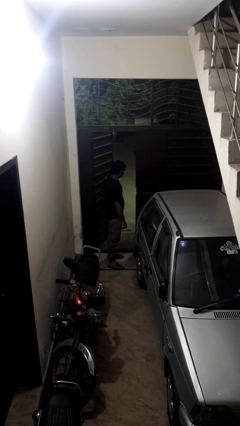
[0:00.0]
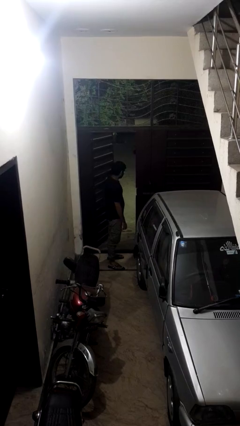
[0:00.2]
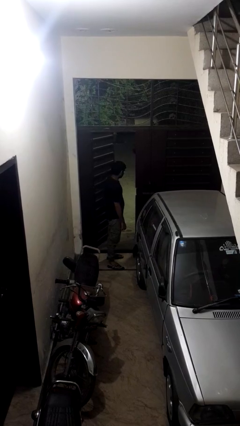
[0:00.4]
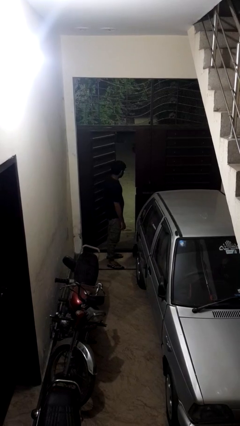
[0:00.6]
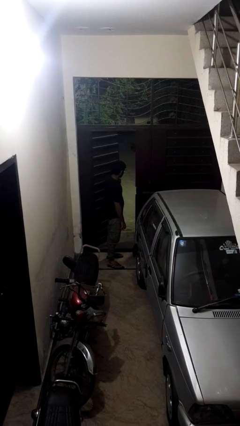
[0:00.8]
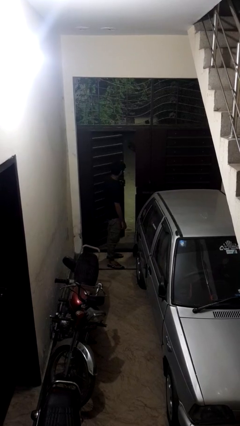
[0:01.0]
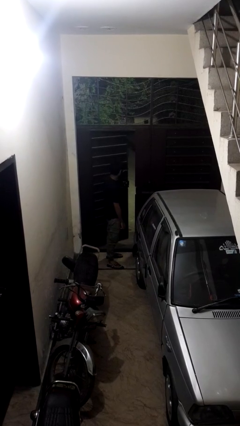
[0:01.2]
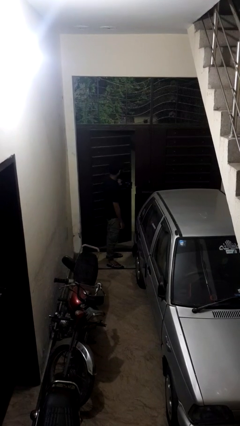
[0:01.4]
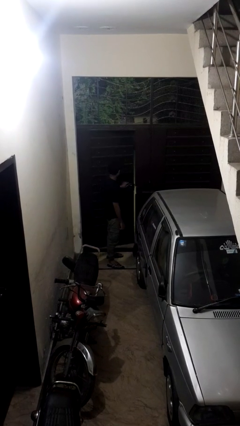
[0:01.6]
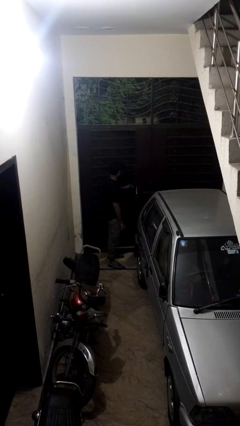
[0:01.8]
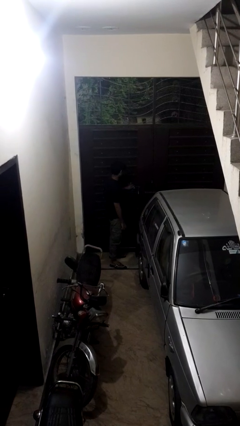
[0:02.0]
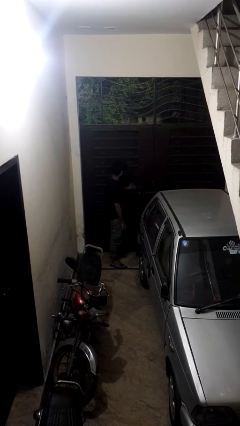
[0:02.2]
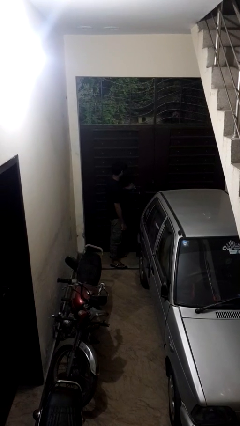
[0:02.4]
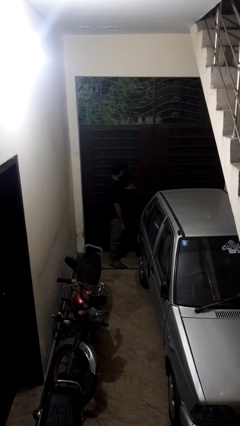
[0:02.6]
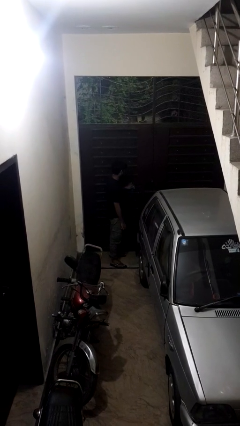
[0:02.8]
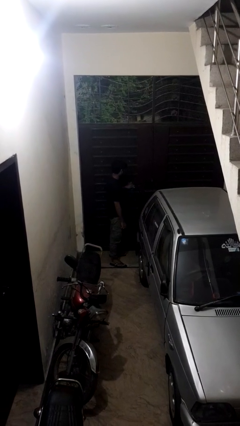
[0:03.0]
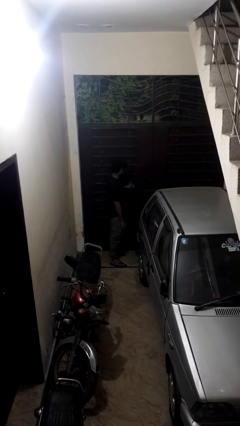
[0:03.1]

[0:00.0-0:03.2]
person closes gate

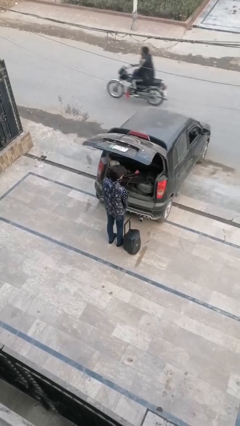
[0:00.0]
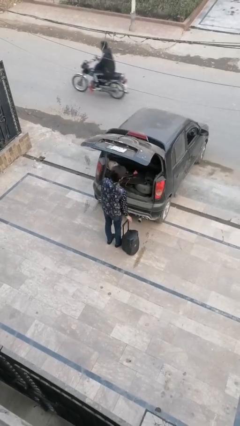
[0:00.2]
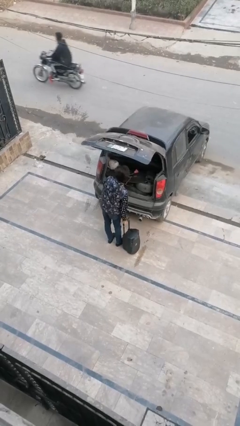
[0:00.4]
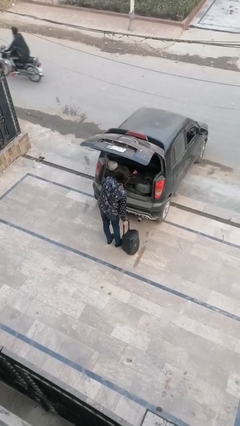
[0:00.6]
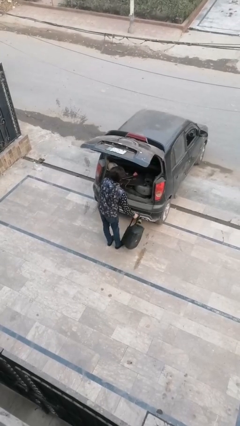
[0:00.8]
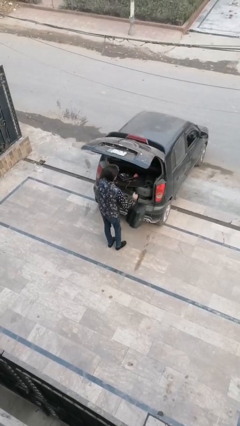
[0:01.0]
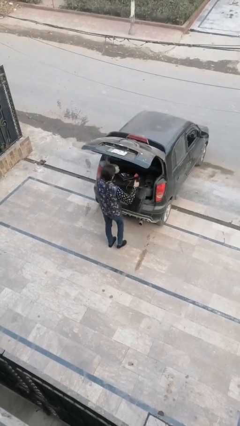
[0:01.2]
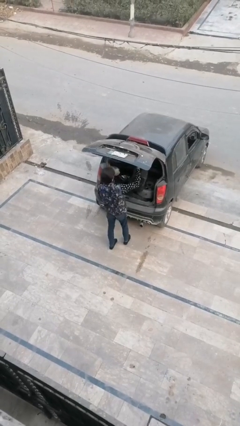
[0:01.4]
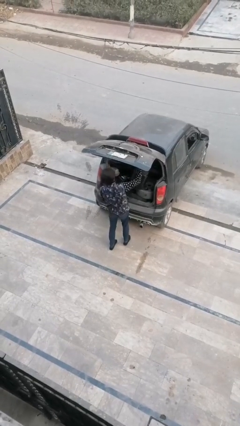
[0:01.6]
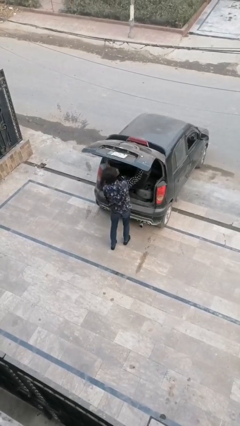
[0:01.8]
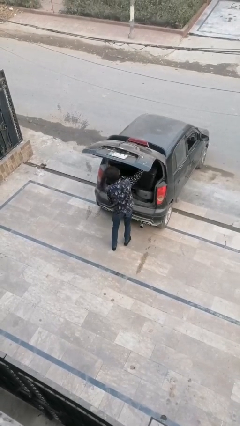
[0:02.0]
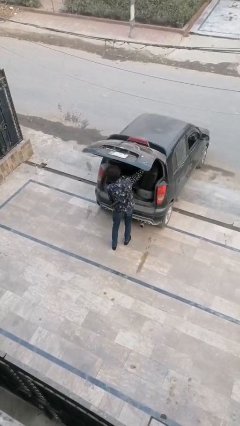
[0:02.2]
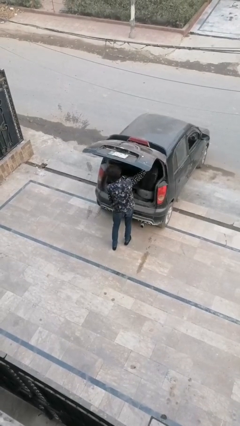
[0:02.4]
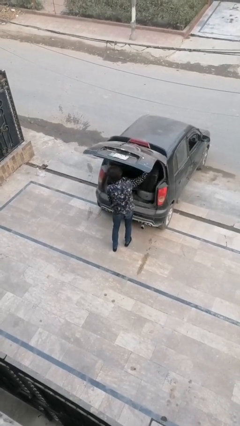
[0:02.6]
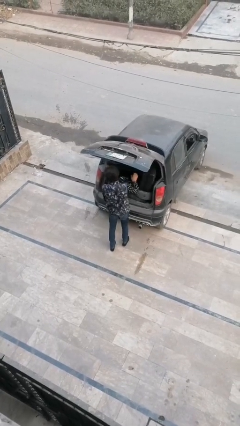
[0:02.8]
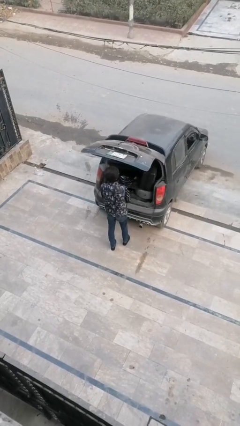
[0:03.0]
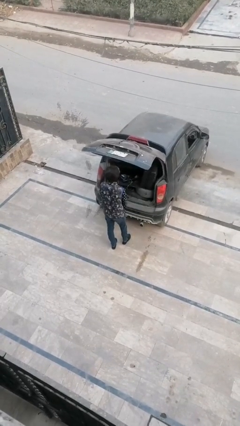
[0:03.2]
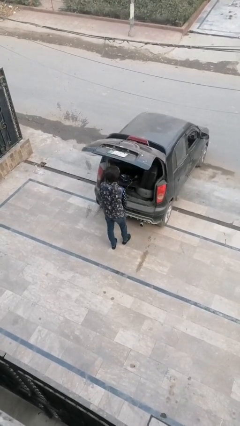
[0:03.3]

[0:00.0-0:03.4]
person loads car

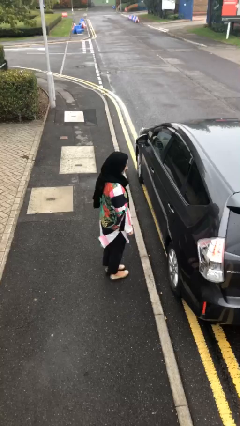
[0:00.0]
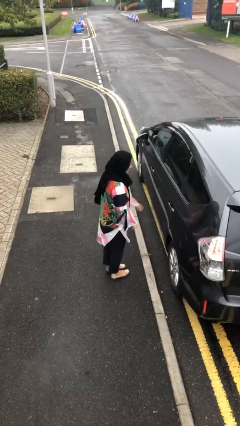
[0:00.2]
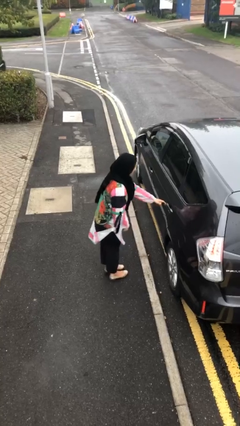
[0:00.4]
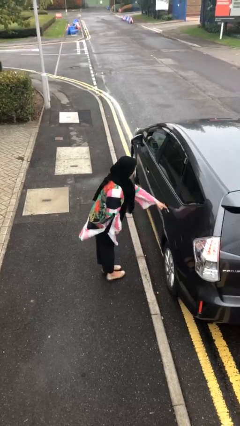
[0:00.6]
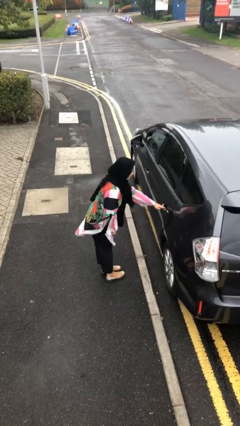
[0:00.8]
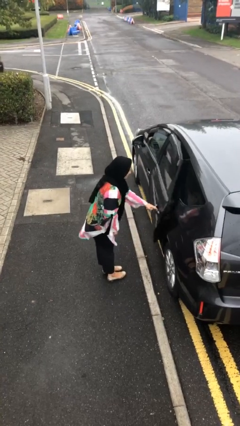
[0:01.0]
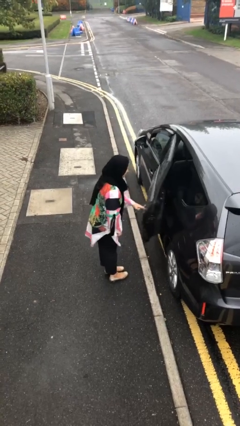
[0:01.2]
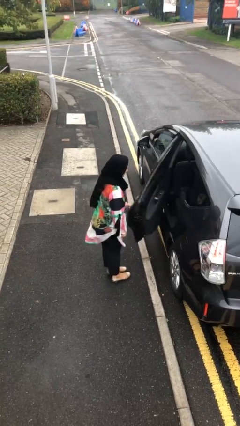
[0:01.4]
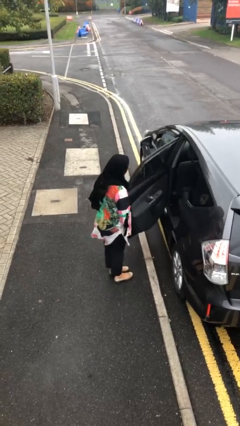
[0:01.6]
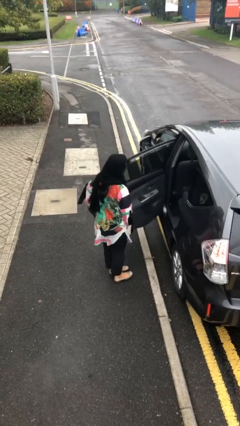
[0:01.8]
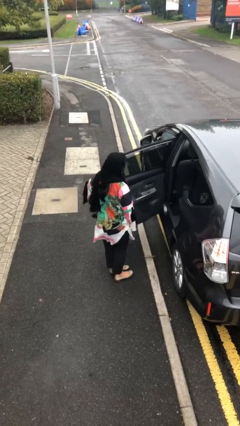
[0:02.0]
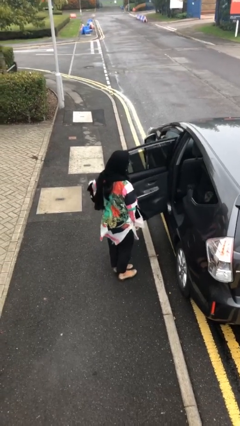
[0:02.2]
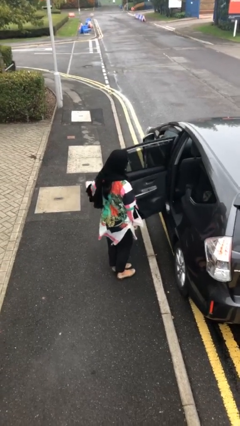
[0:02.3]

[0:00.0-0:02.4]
person opens car door

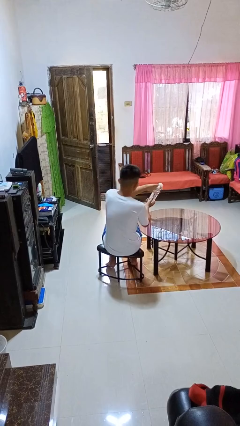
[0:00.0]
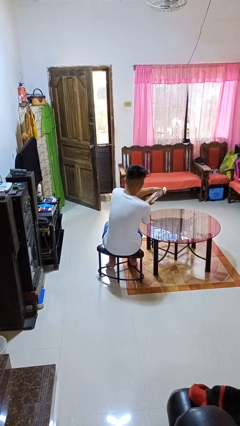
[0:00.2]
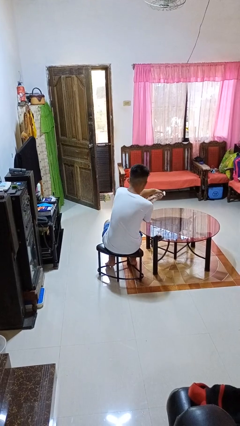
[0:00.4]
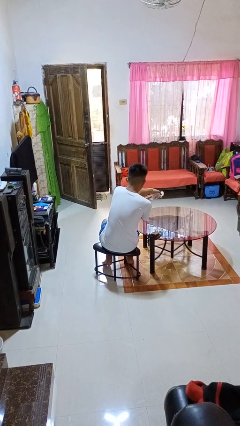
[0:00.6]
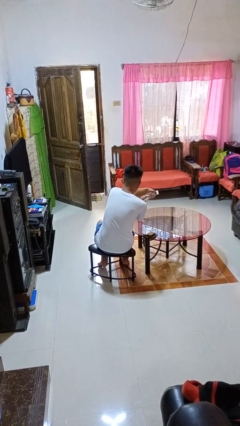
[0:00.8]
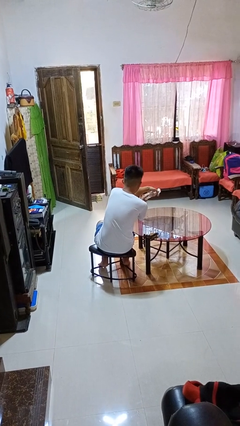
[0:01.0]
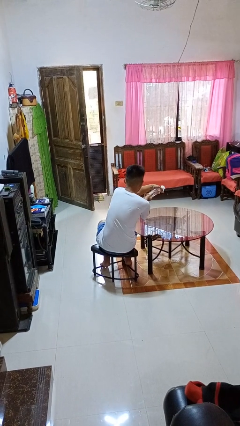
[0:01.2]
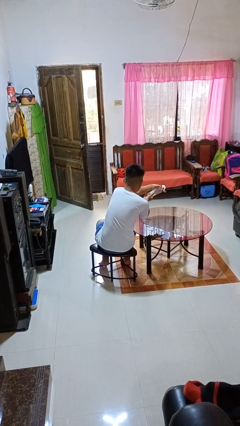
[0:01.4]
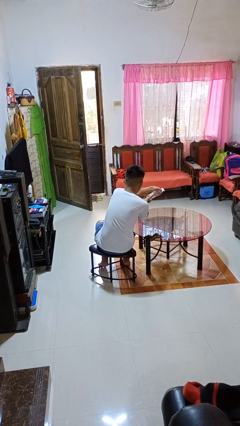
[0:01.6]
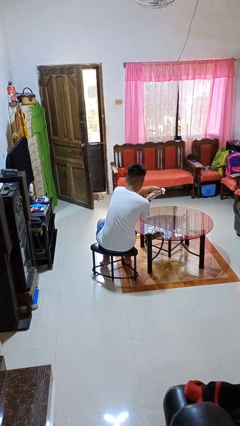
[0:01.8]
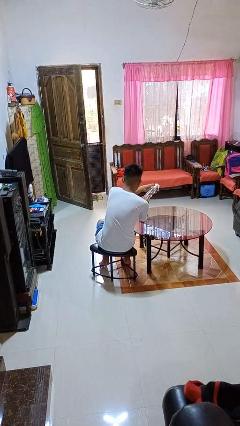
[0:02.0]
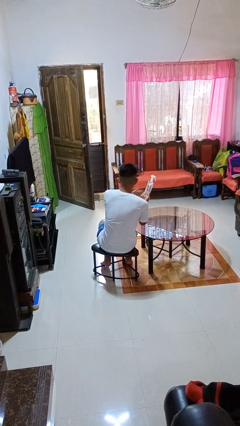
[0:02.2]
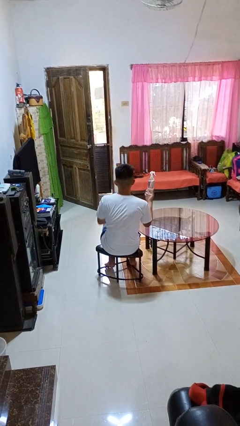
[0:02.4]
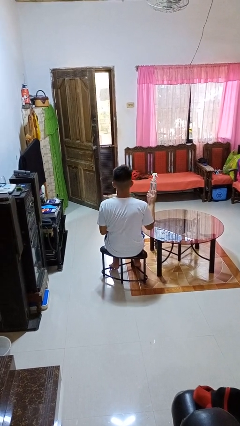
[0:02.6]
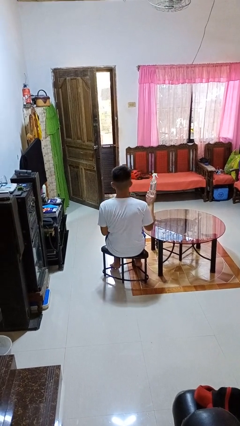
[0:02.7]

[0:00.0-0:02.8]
person sprays from bottle

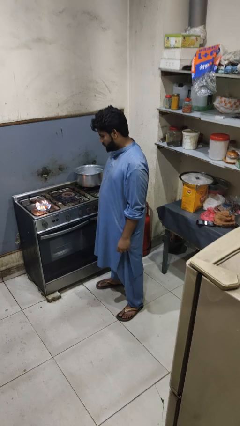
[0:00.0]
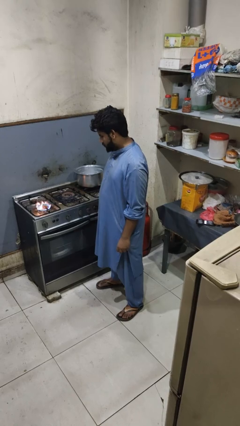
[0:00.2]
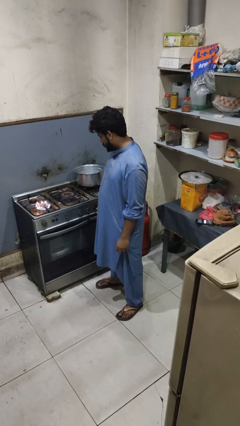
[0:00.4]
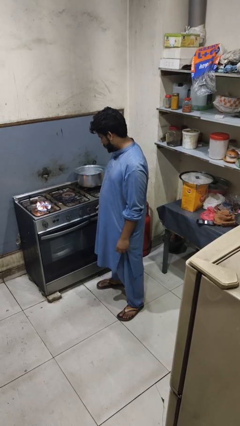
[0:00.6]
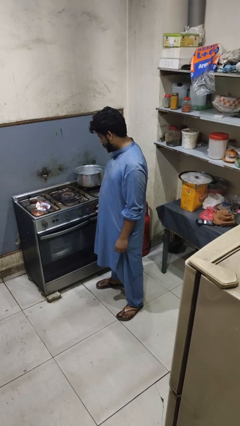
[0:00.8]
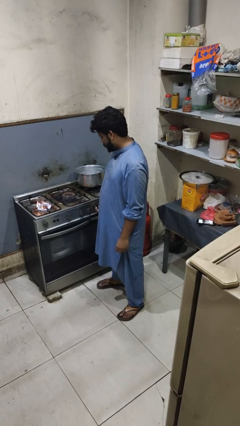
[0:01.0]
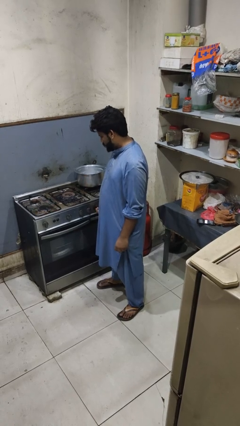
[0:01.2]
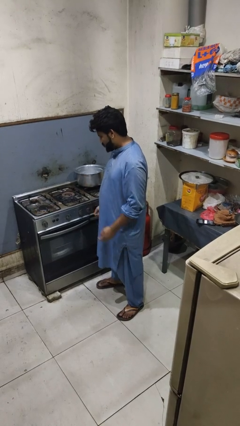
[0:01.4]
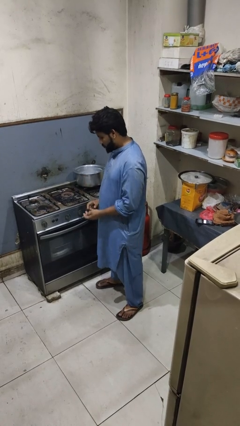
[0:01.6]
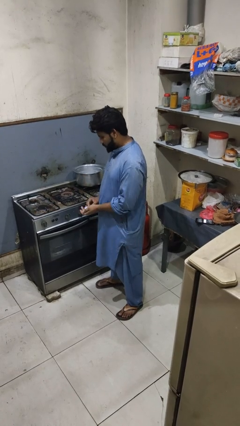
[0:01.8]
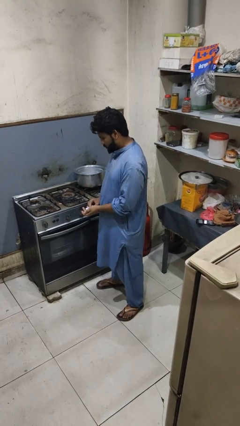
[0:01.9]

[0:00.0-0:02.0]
person turns off stovetop

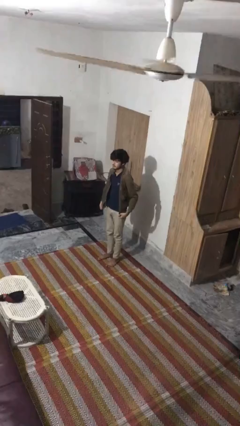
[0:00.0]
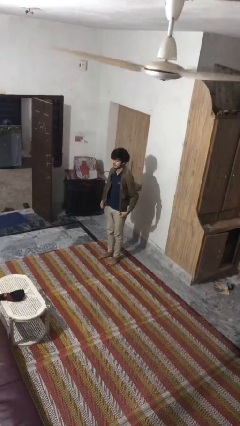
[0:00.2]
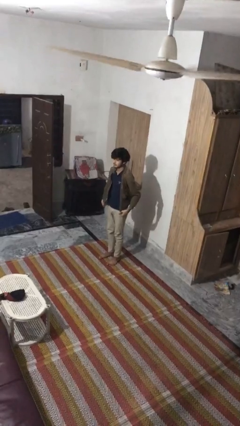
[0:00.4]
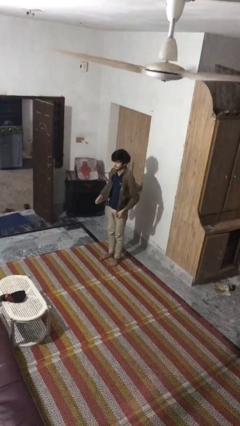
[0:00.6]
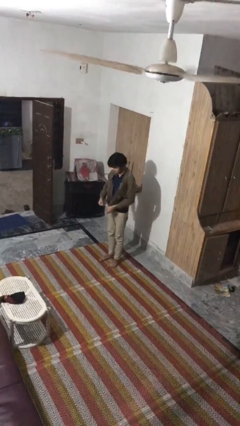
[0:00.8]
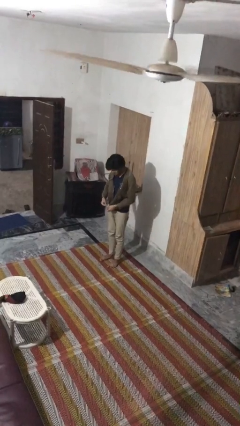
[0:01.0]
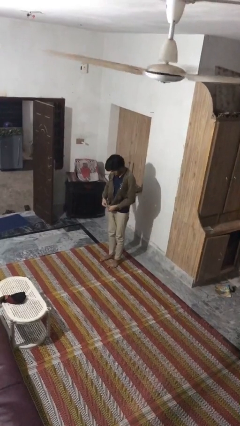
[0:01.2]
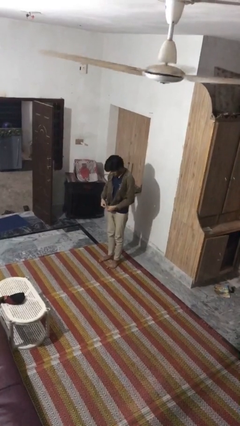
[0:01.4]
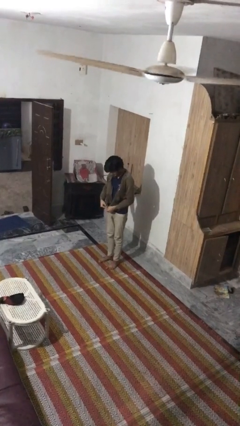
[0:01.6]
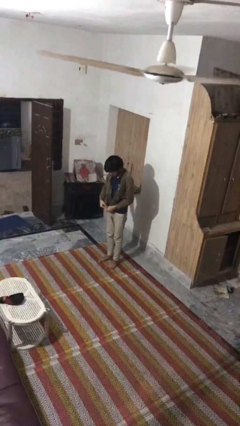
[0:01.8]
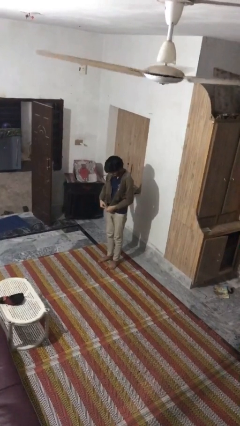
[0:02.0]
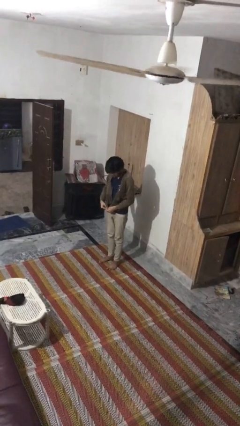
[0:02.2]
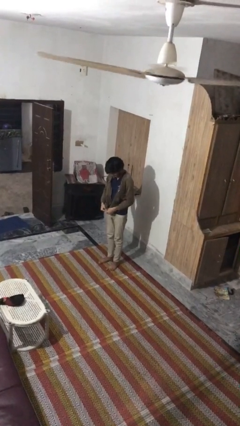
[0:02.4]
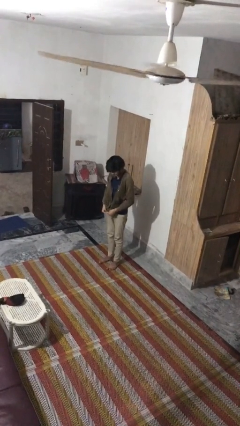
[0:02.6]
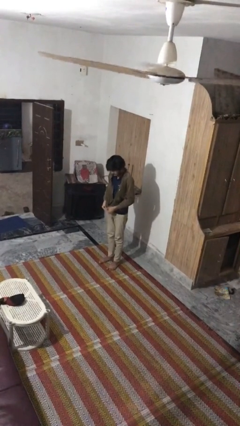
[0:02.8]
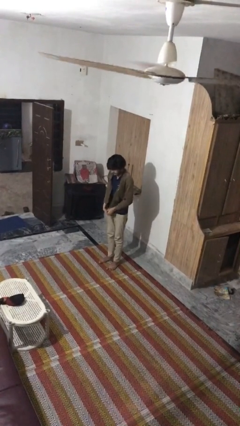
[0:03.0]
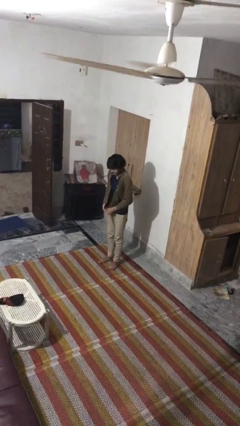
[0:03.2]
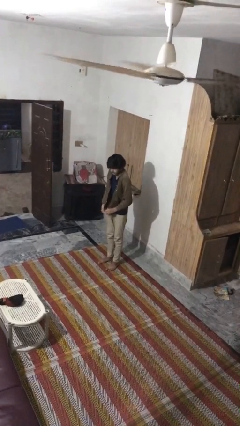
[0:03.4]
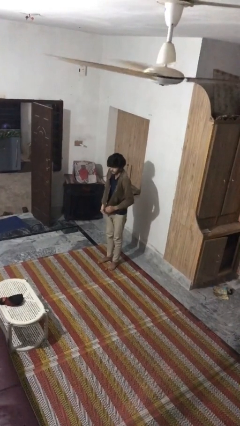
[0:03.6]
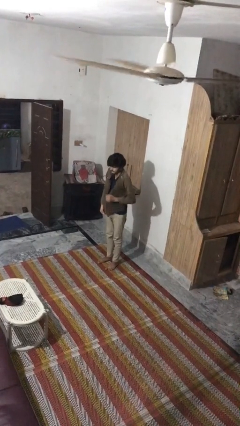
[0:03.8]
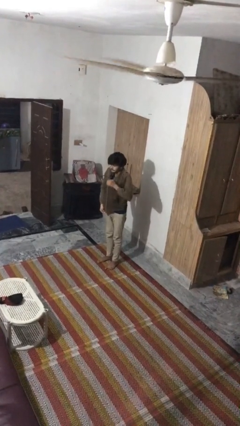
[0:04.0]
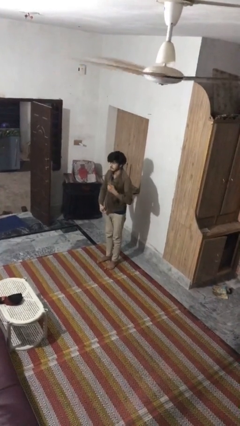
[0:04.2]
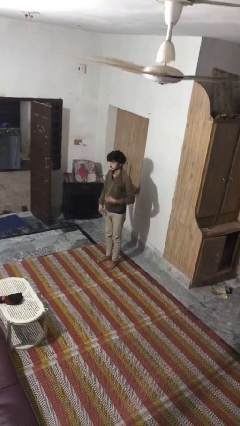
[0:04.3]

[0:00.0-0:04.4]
person zips up jacket
